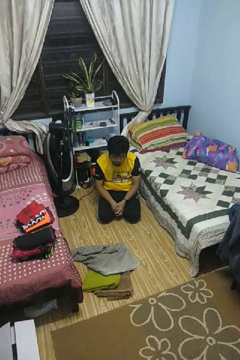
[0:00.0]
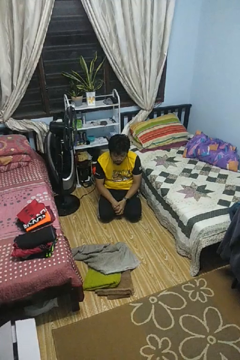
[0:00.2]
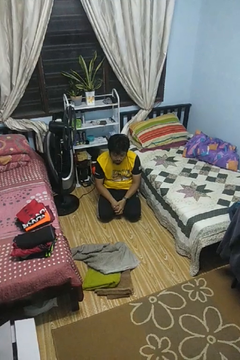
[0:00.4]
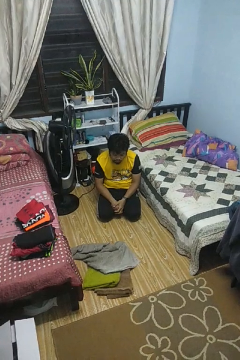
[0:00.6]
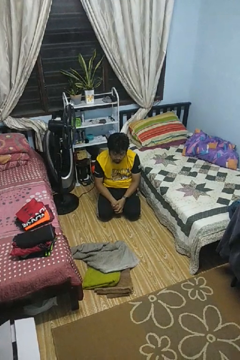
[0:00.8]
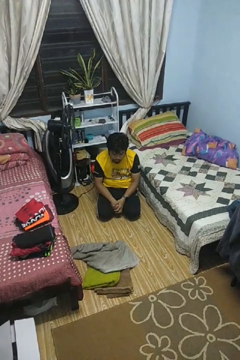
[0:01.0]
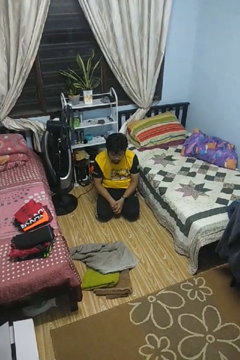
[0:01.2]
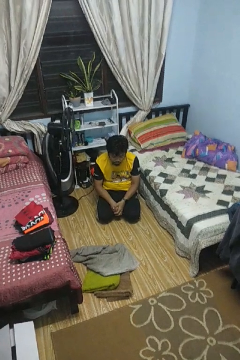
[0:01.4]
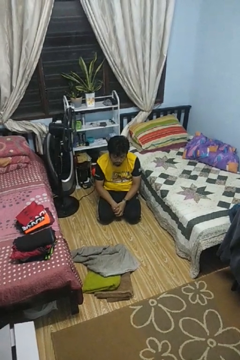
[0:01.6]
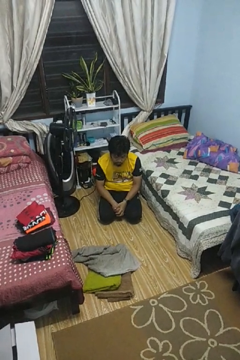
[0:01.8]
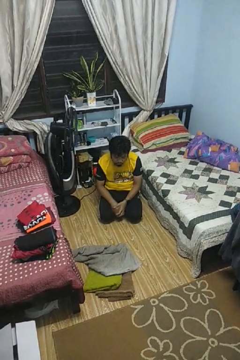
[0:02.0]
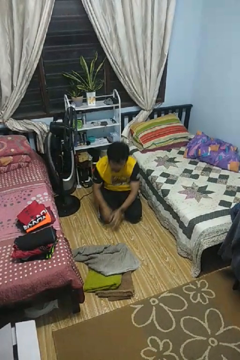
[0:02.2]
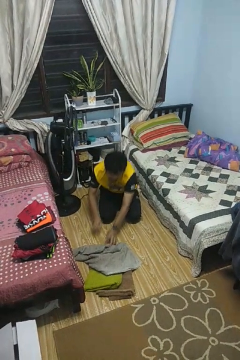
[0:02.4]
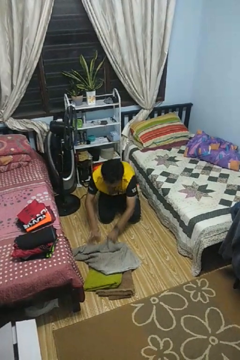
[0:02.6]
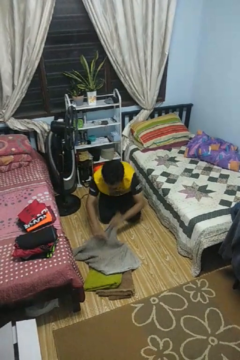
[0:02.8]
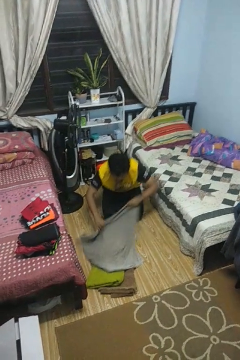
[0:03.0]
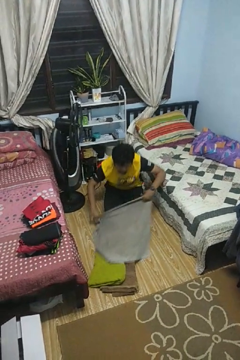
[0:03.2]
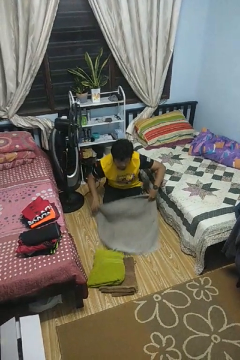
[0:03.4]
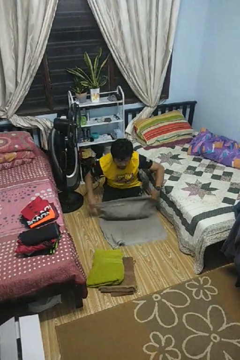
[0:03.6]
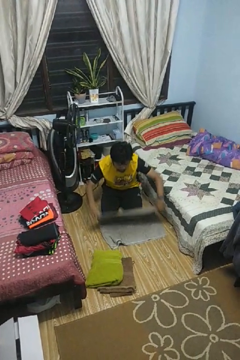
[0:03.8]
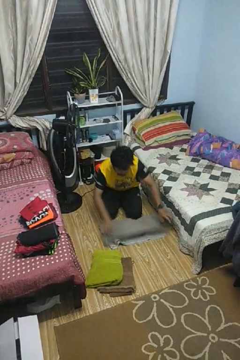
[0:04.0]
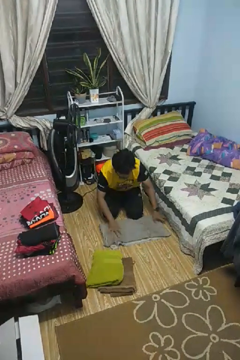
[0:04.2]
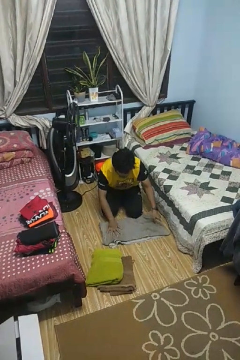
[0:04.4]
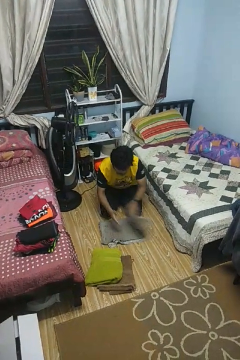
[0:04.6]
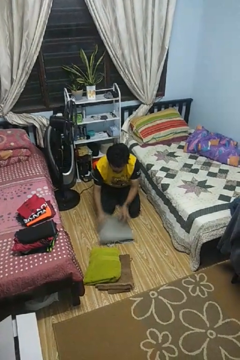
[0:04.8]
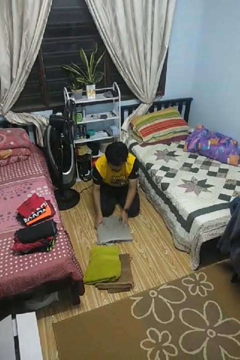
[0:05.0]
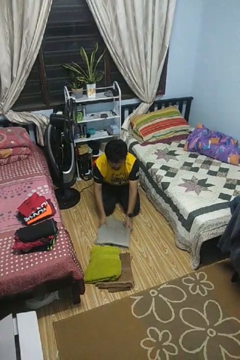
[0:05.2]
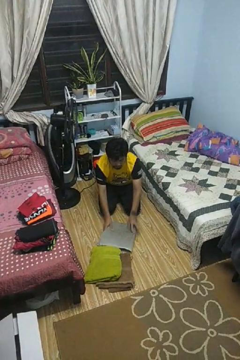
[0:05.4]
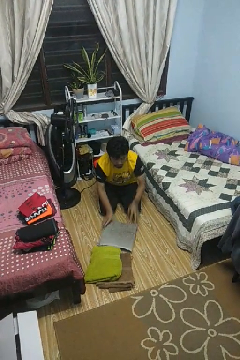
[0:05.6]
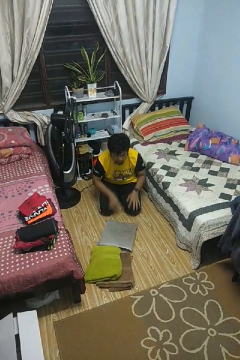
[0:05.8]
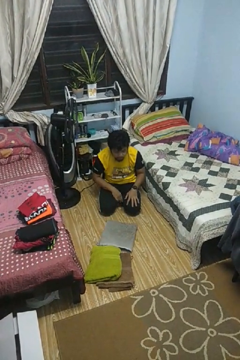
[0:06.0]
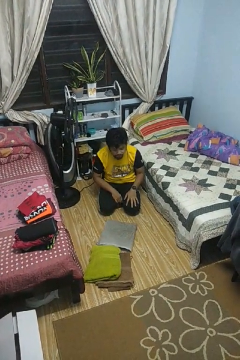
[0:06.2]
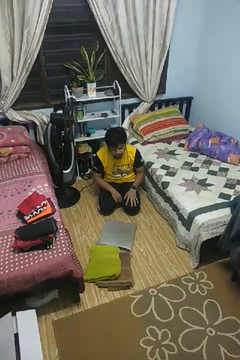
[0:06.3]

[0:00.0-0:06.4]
person folds towel

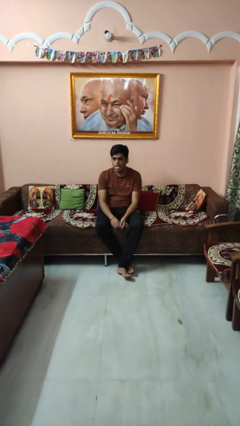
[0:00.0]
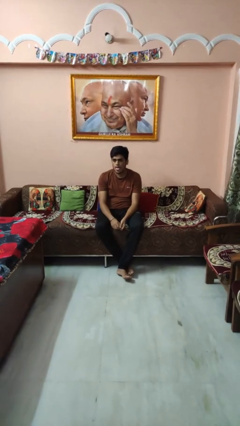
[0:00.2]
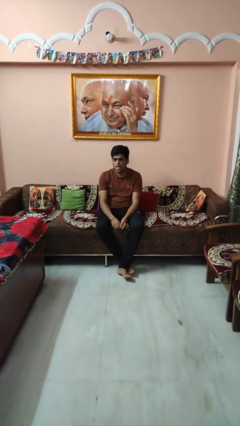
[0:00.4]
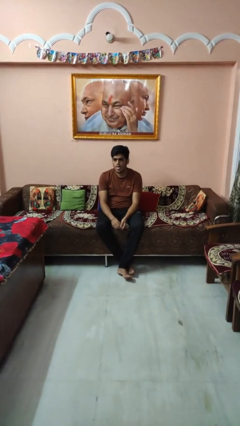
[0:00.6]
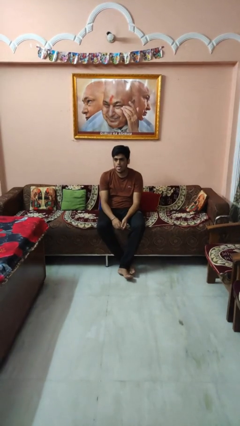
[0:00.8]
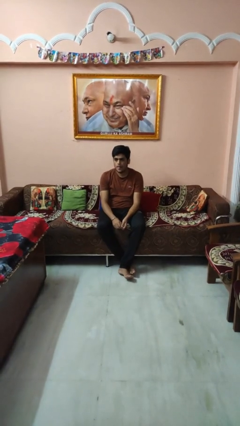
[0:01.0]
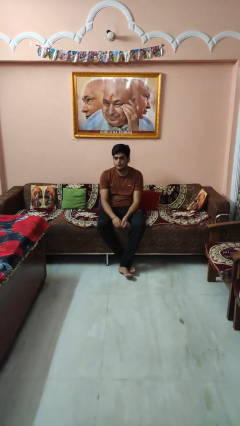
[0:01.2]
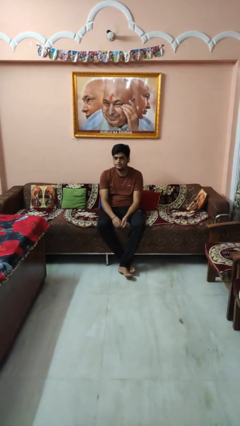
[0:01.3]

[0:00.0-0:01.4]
person sticks out tongue

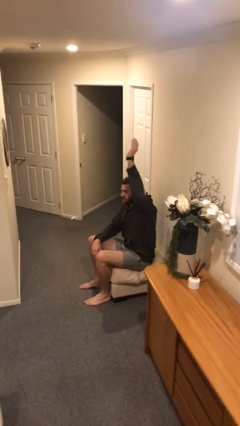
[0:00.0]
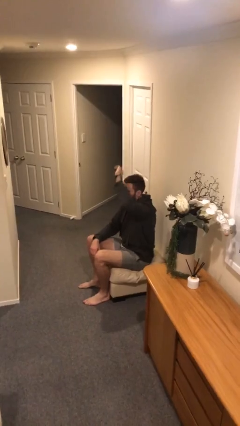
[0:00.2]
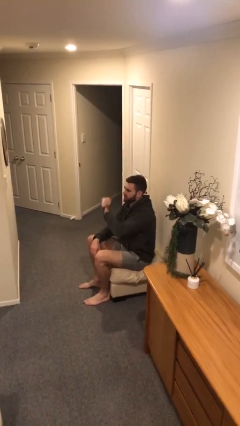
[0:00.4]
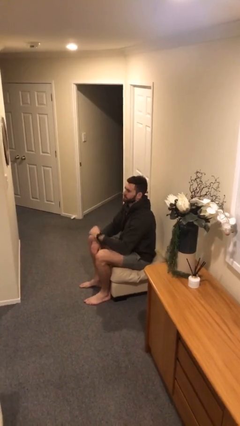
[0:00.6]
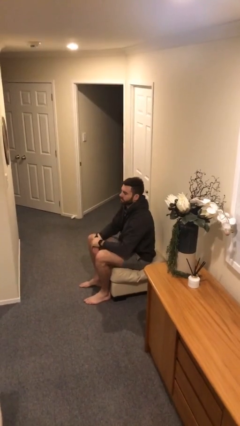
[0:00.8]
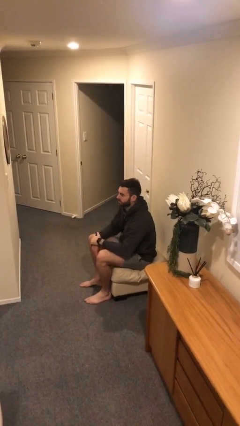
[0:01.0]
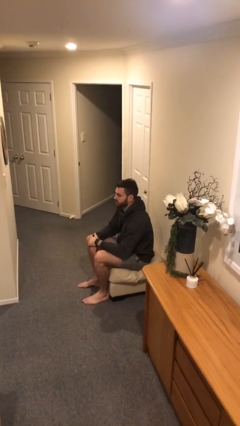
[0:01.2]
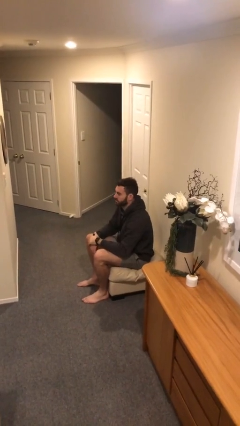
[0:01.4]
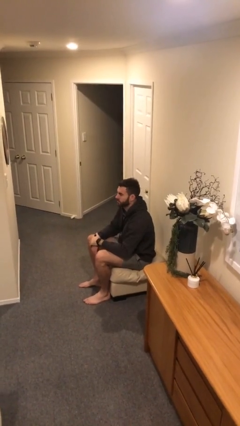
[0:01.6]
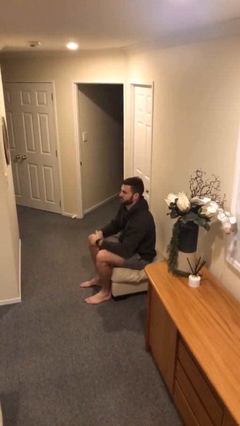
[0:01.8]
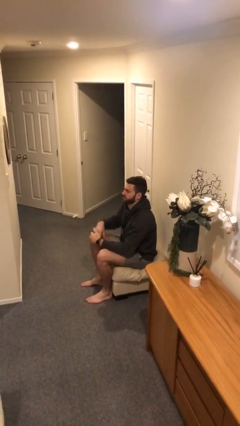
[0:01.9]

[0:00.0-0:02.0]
person gestures lower hand

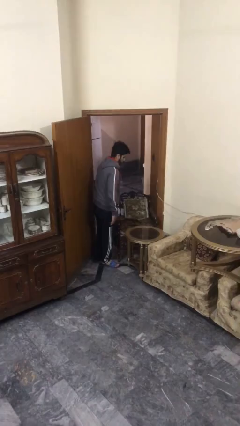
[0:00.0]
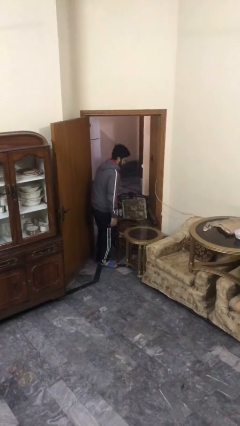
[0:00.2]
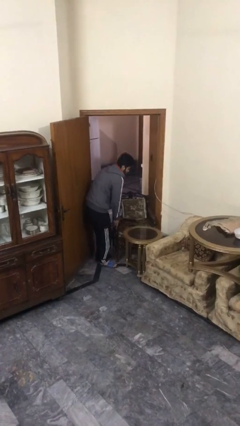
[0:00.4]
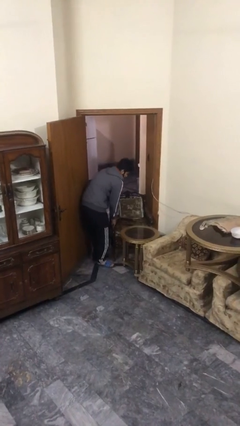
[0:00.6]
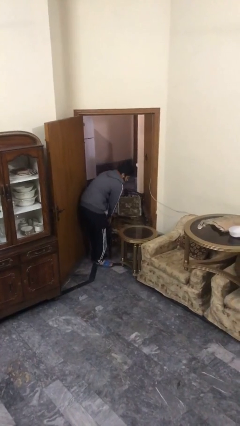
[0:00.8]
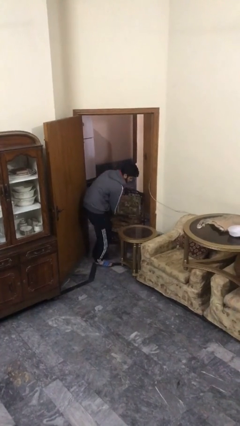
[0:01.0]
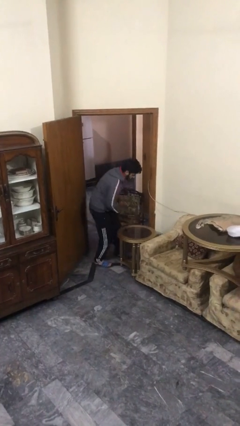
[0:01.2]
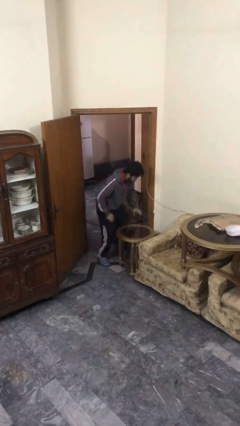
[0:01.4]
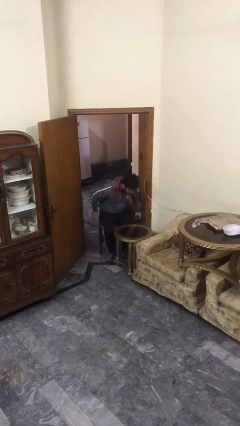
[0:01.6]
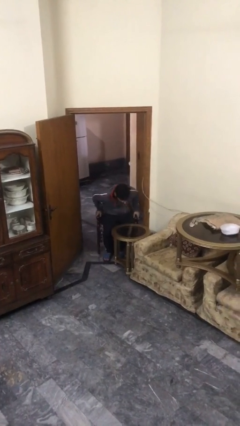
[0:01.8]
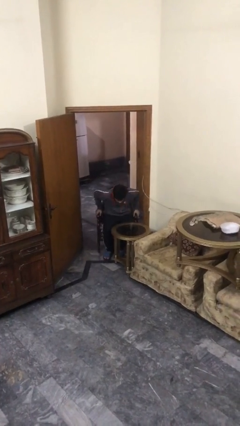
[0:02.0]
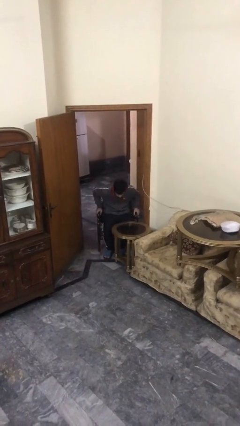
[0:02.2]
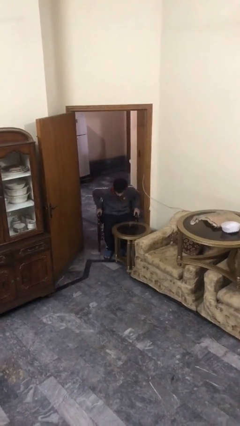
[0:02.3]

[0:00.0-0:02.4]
person sits down

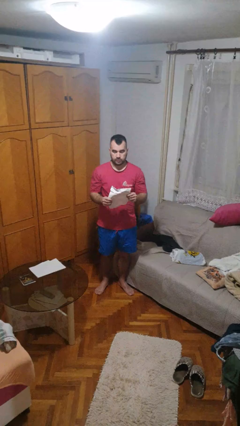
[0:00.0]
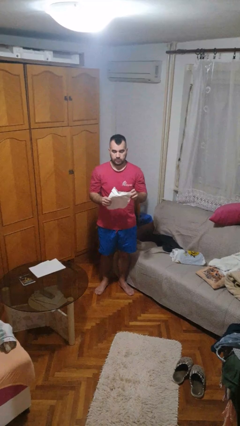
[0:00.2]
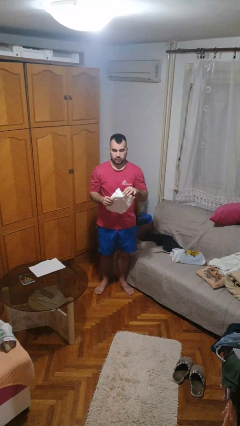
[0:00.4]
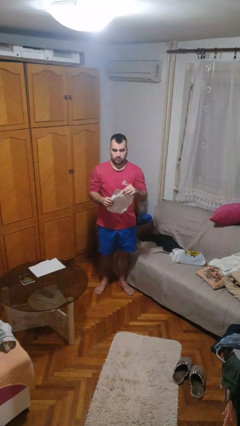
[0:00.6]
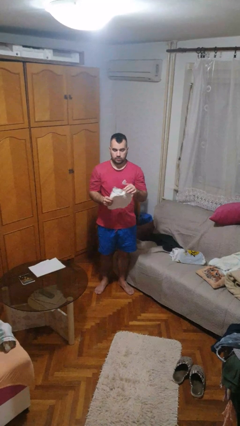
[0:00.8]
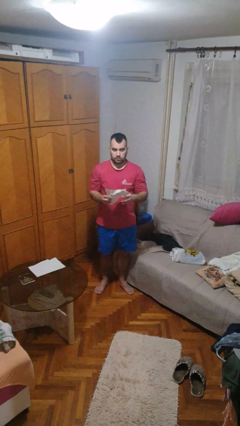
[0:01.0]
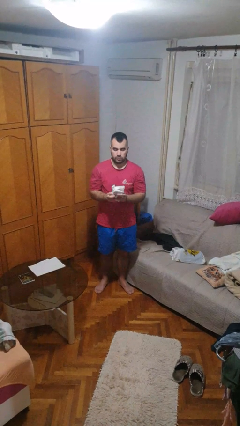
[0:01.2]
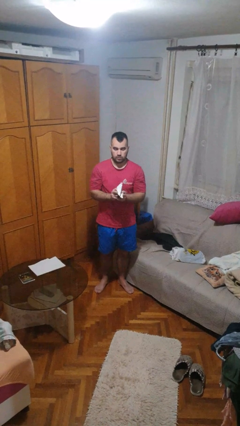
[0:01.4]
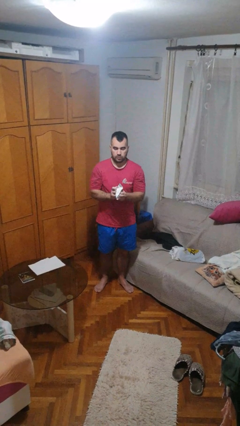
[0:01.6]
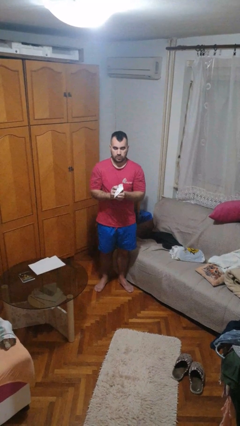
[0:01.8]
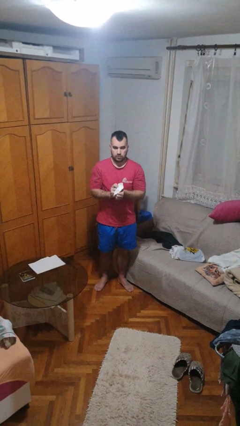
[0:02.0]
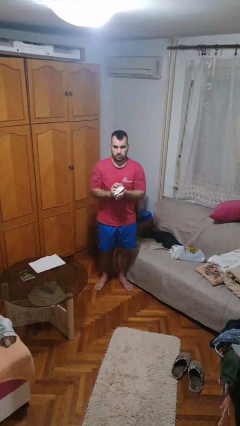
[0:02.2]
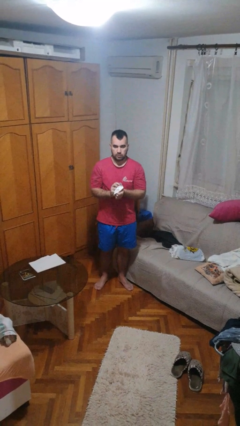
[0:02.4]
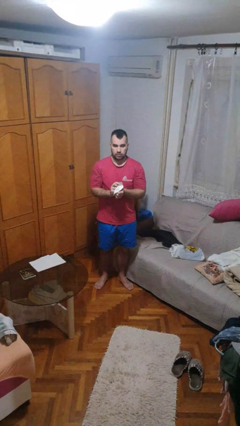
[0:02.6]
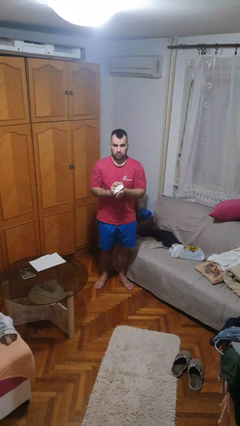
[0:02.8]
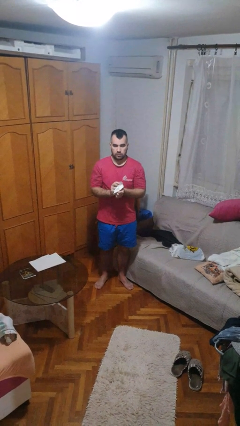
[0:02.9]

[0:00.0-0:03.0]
person crumples paper

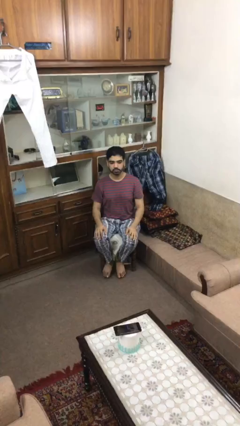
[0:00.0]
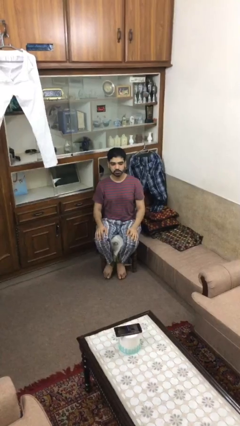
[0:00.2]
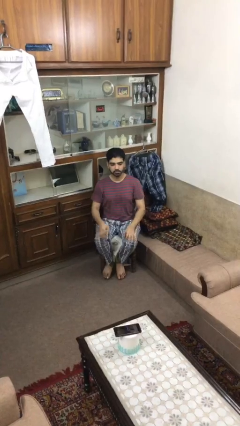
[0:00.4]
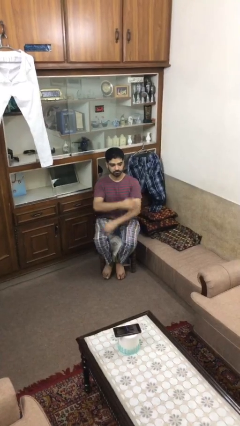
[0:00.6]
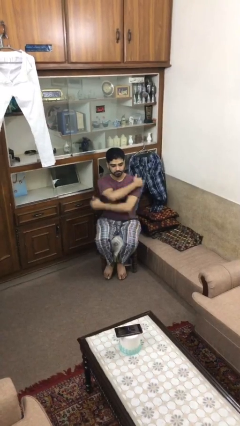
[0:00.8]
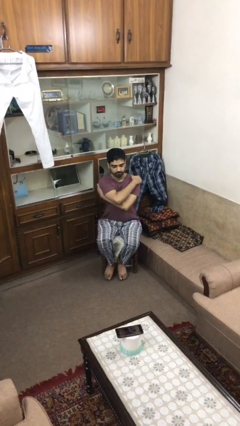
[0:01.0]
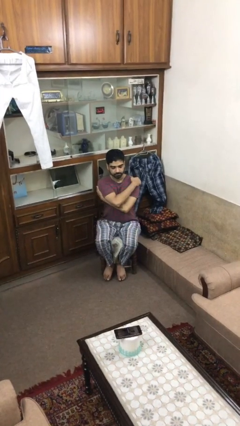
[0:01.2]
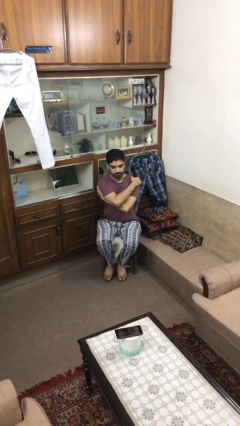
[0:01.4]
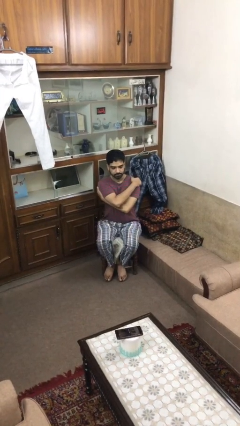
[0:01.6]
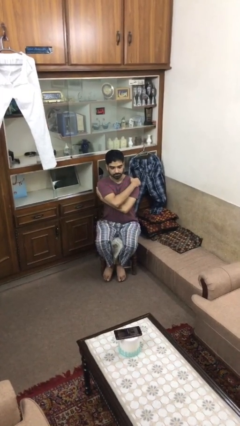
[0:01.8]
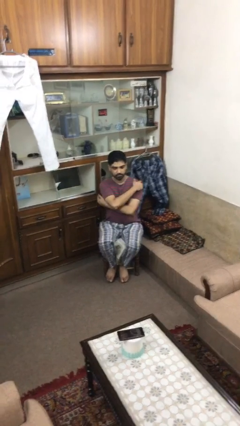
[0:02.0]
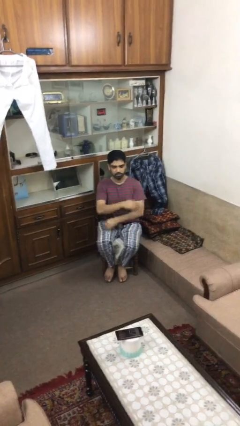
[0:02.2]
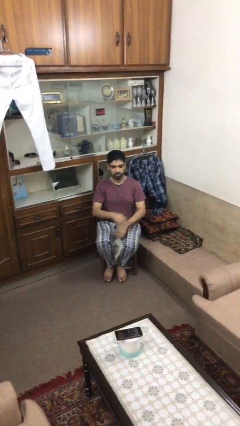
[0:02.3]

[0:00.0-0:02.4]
person crosses arms

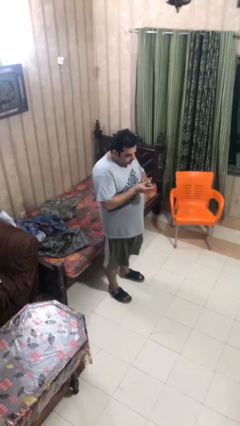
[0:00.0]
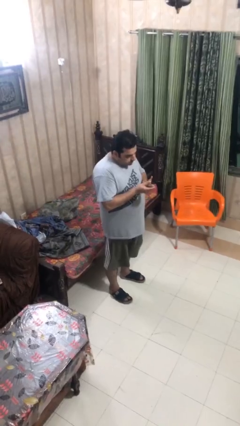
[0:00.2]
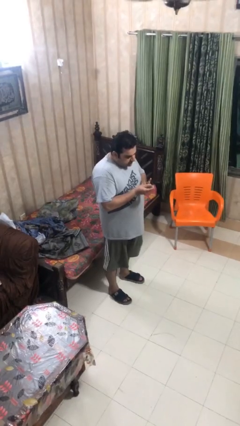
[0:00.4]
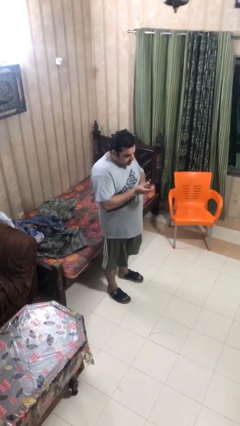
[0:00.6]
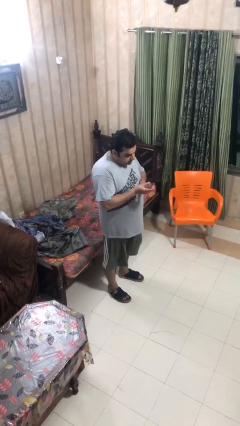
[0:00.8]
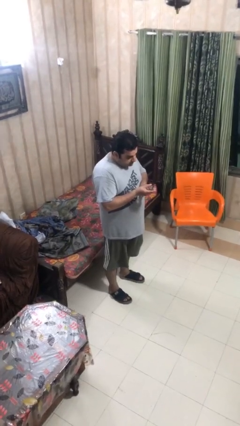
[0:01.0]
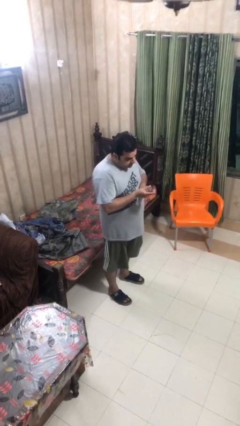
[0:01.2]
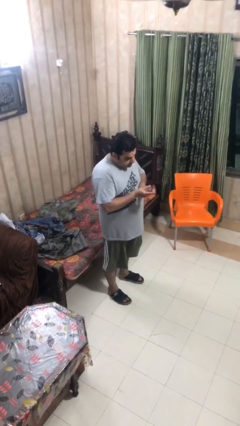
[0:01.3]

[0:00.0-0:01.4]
person clips fingernails
